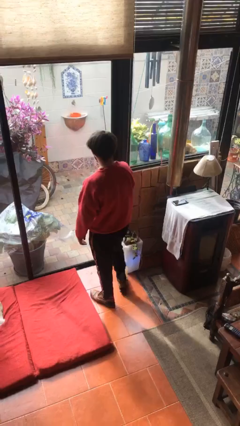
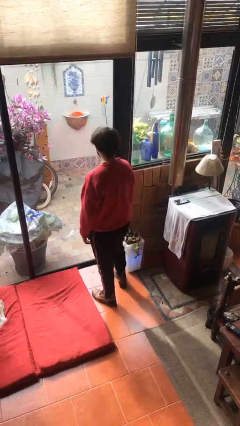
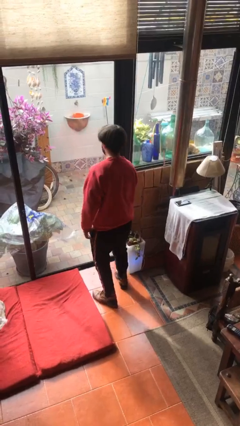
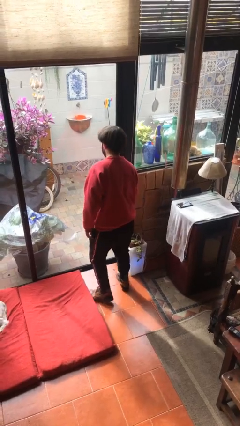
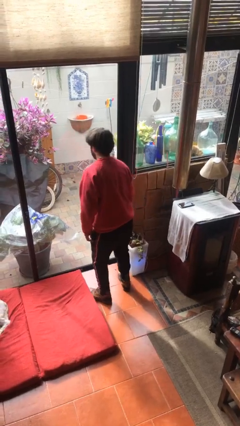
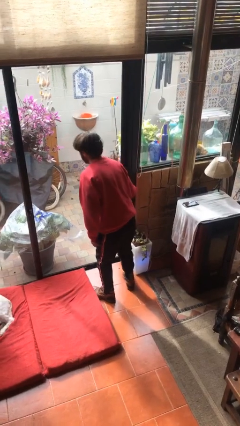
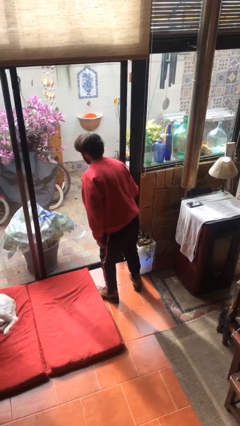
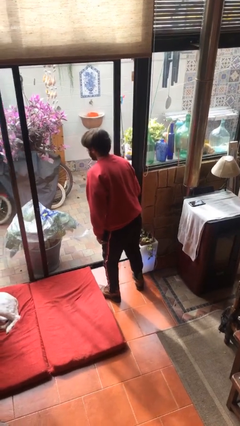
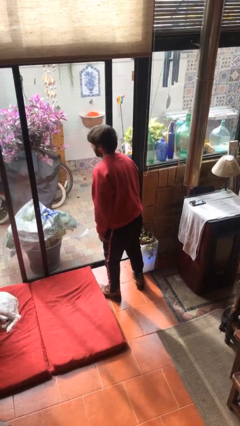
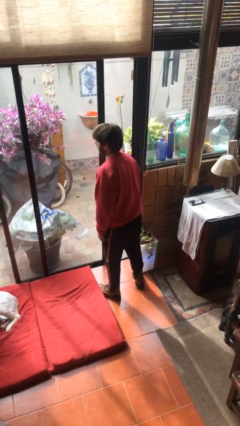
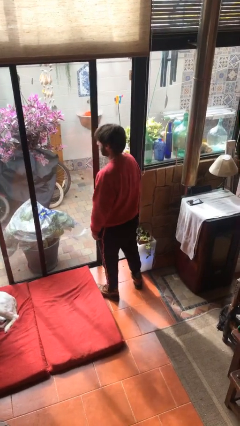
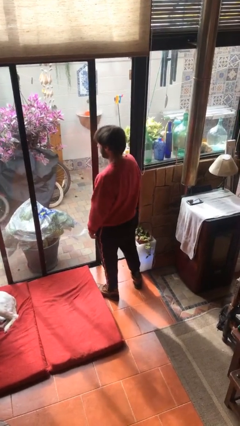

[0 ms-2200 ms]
person opens sliding door

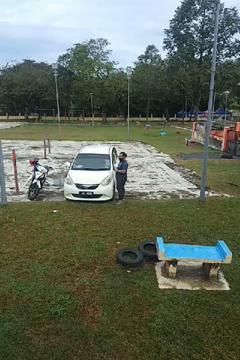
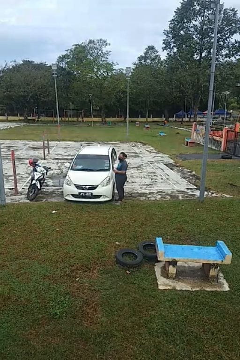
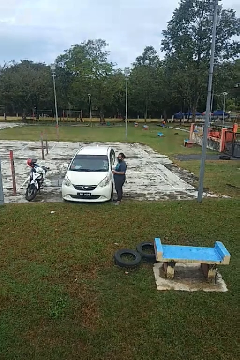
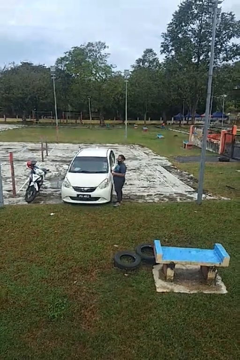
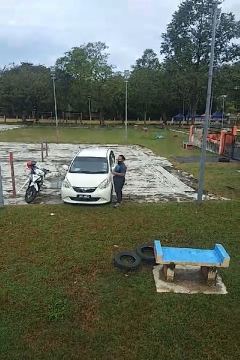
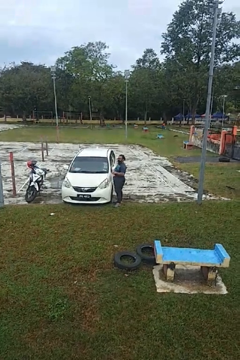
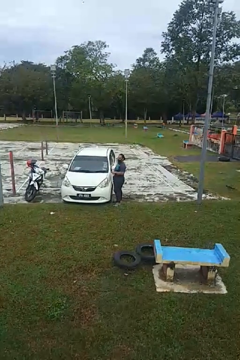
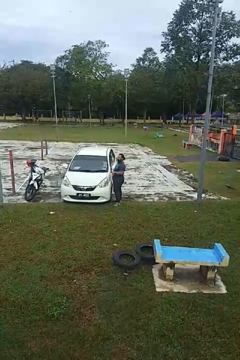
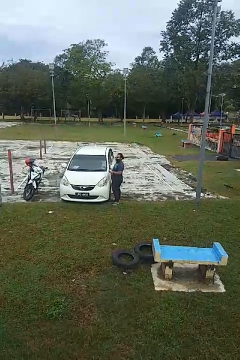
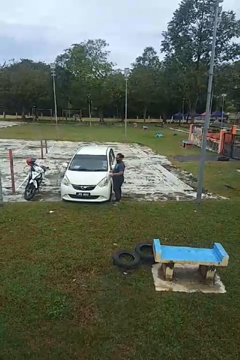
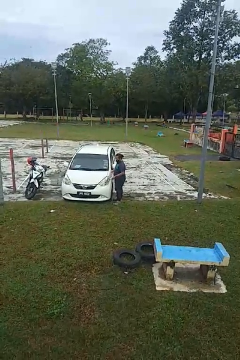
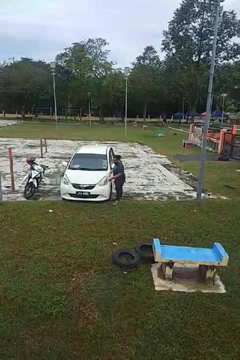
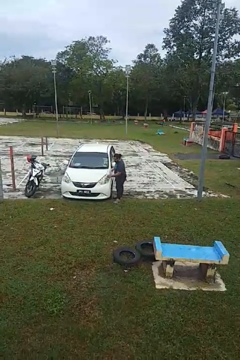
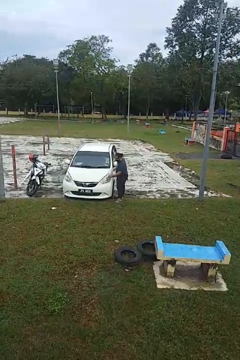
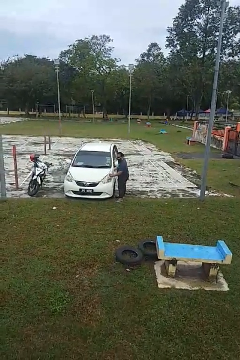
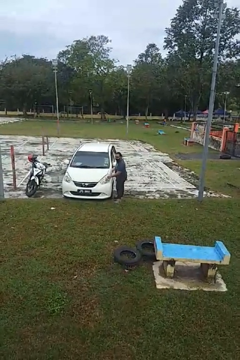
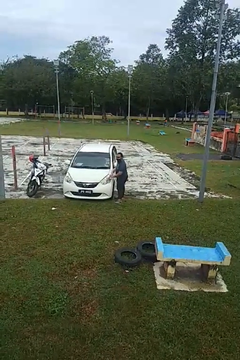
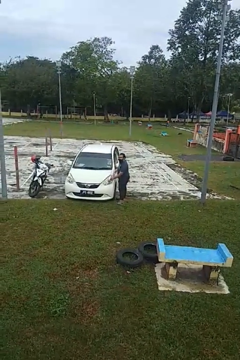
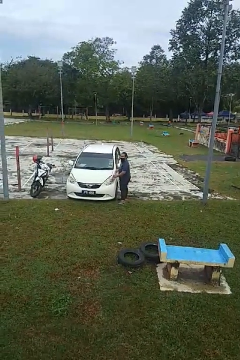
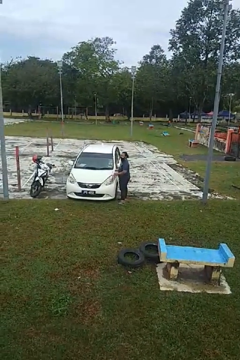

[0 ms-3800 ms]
person polishes car with rag

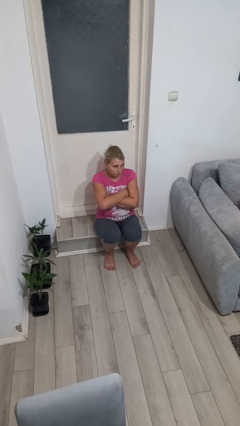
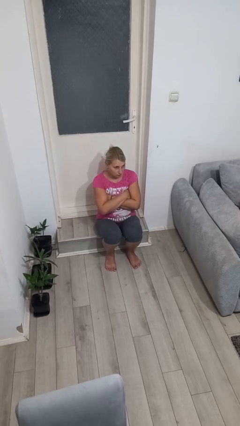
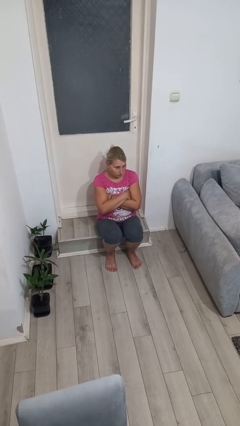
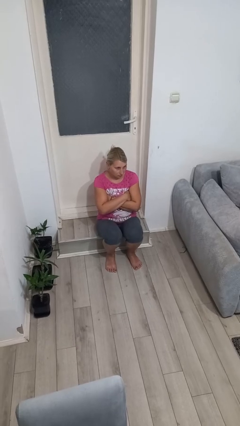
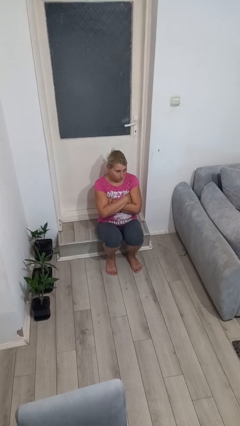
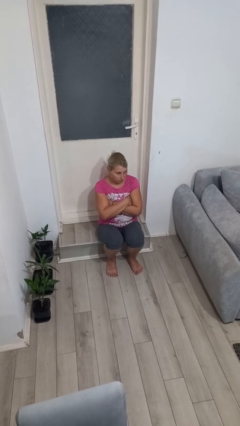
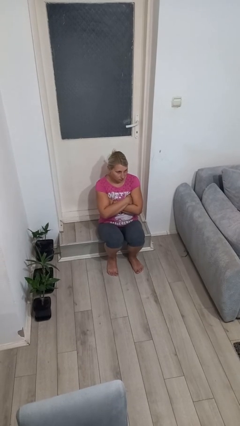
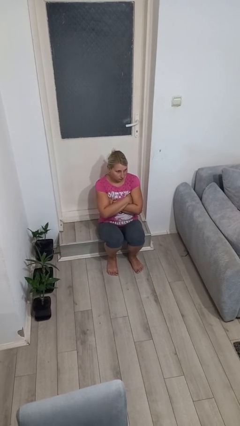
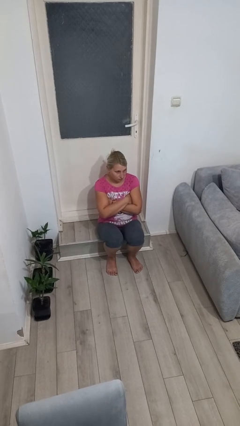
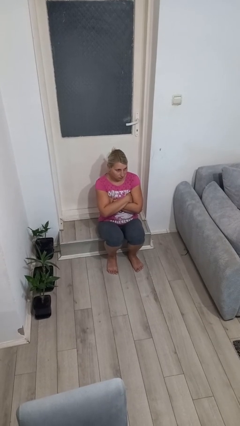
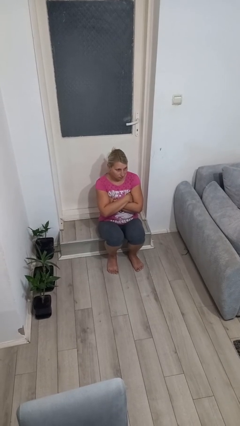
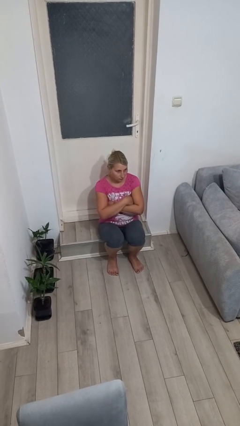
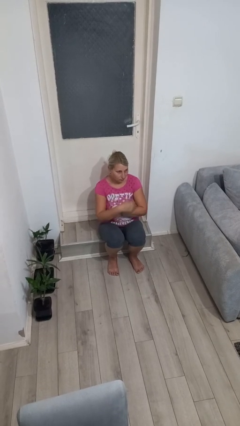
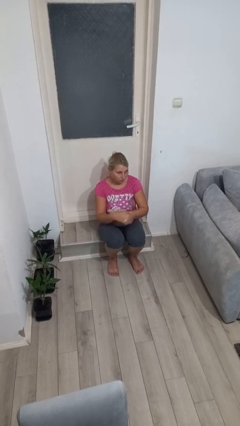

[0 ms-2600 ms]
person crosses arms

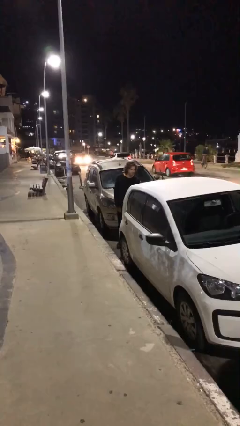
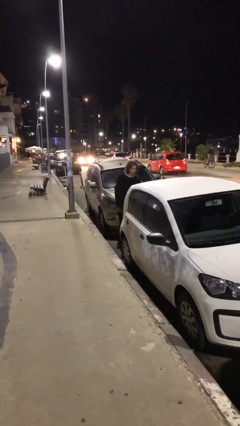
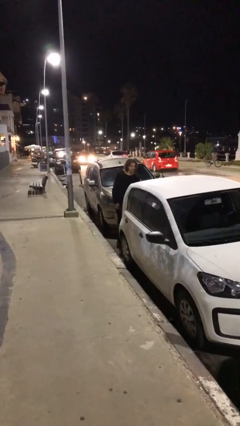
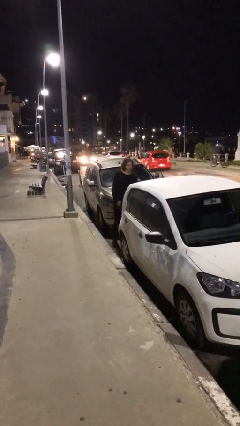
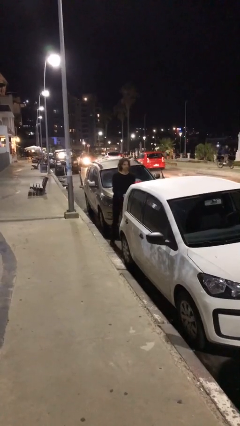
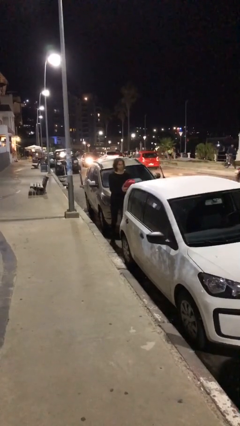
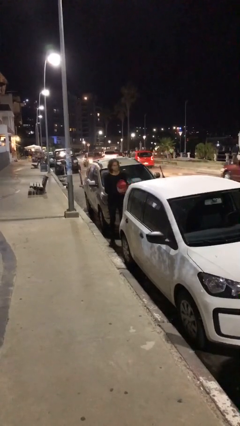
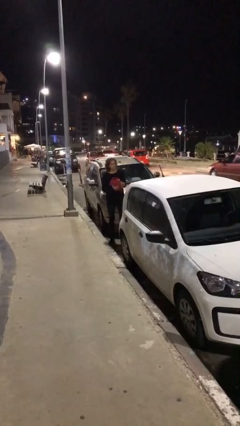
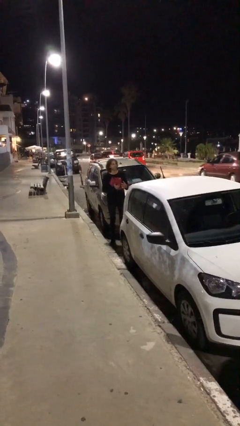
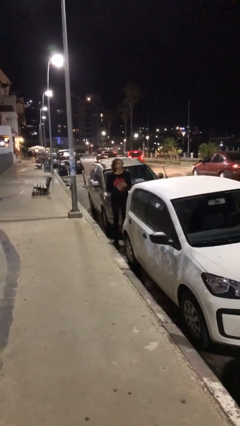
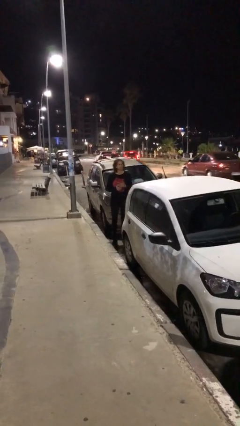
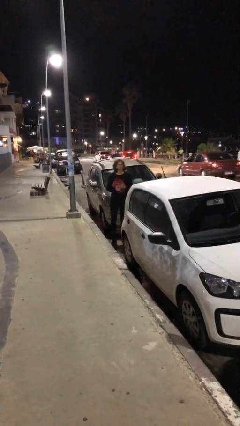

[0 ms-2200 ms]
person unloads car

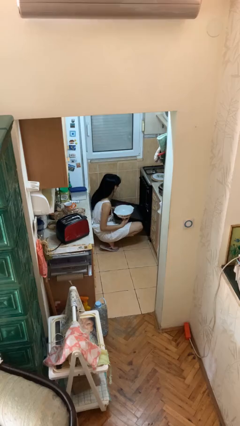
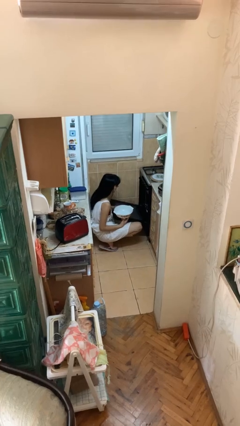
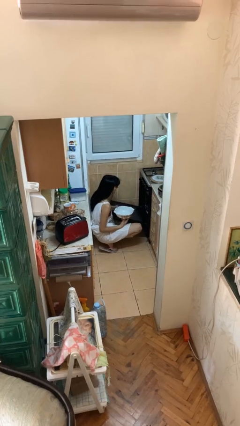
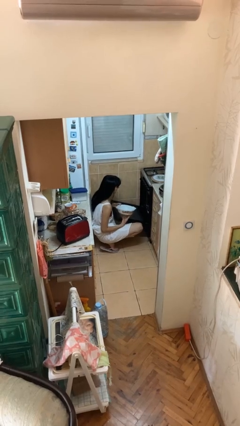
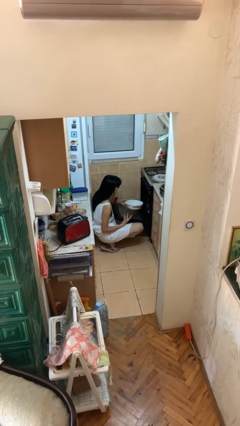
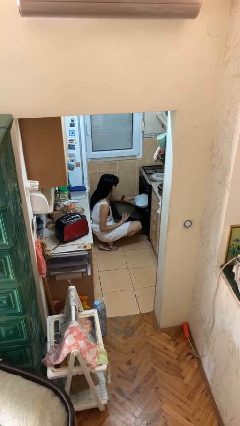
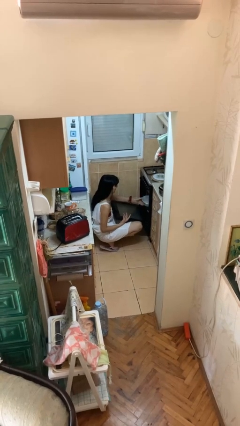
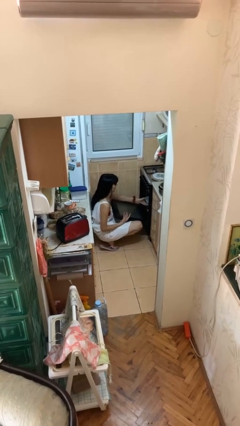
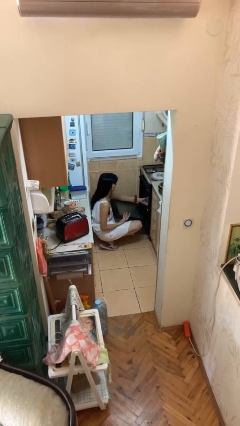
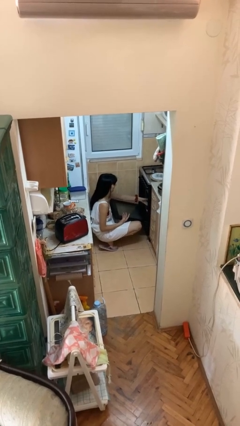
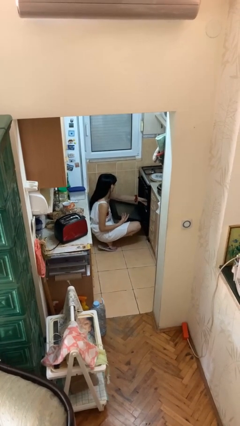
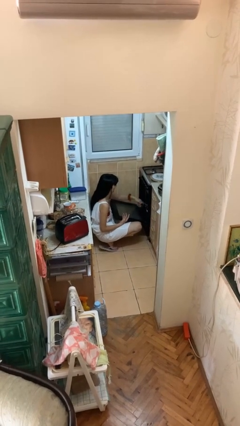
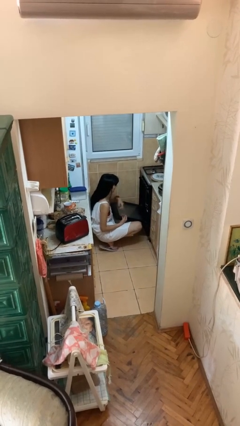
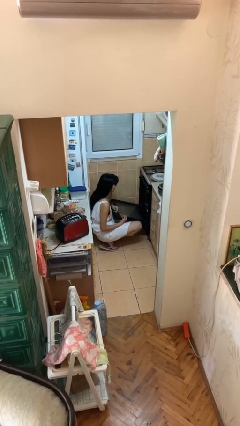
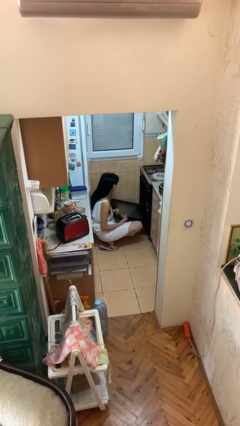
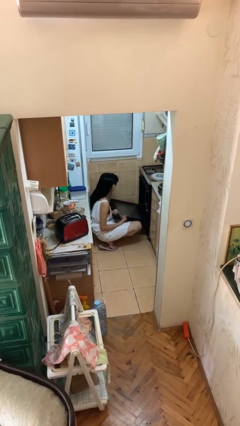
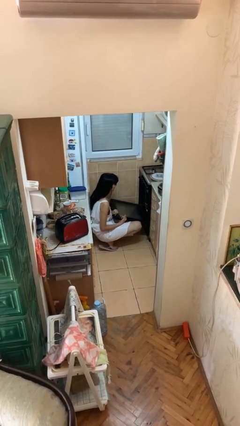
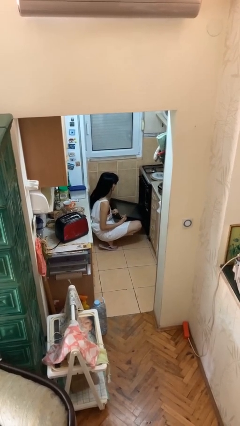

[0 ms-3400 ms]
person puts object into oven

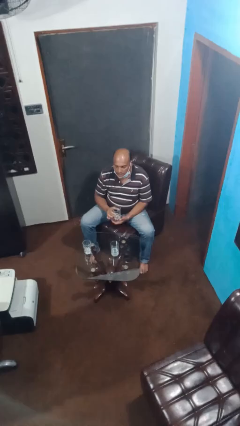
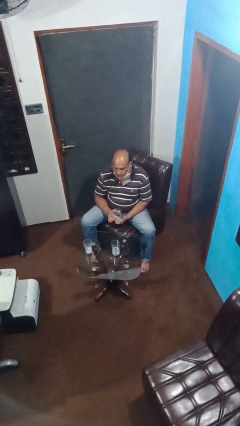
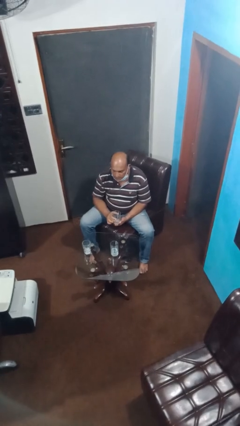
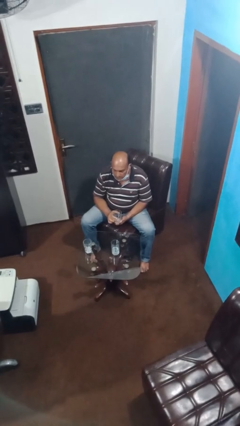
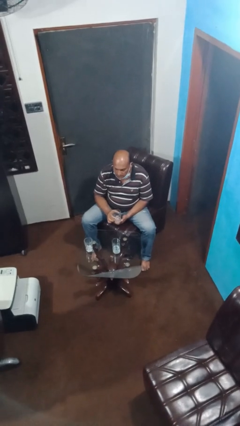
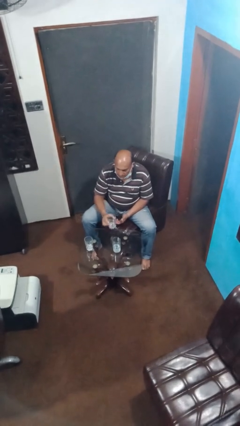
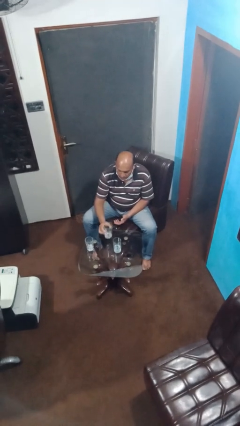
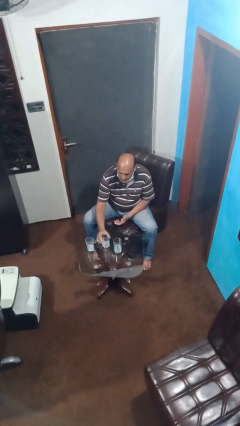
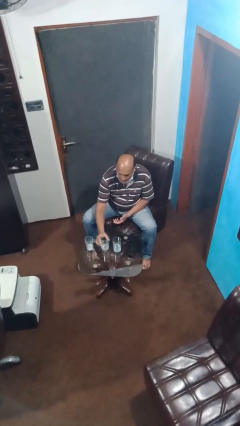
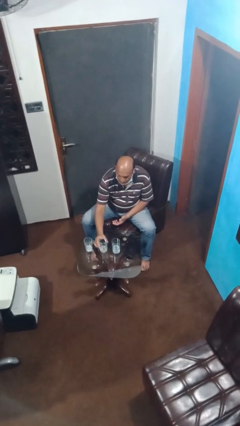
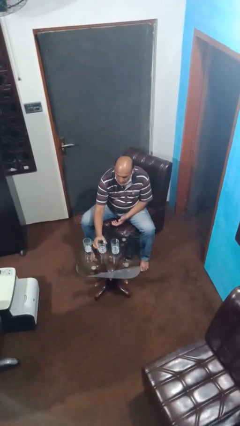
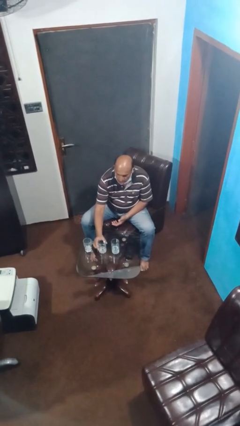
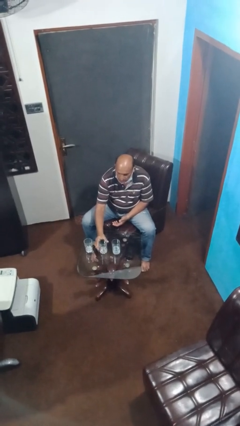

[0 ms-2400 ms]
person puts down object on table

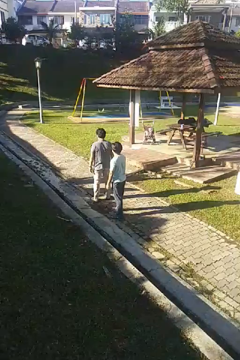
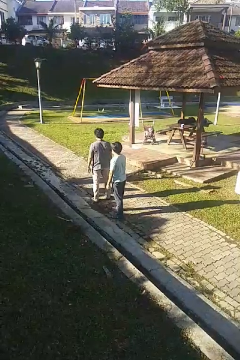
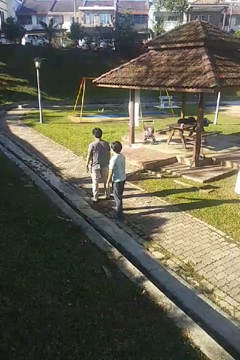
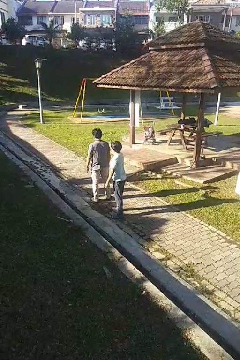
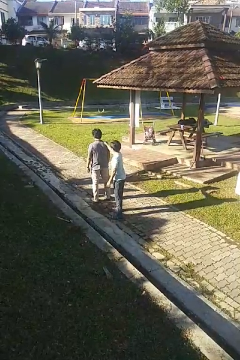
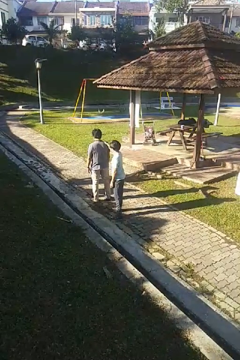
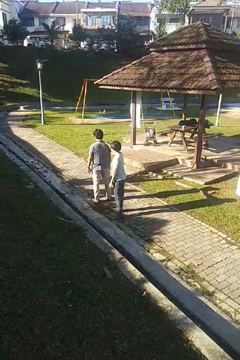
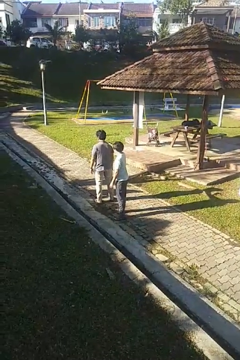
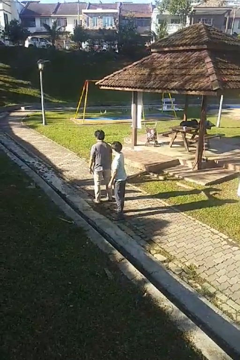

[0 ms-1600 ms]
person grabs person by shoulder
